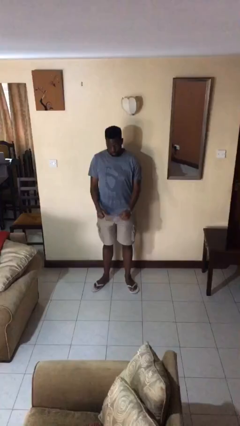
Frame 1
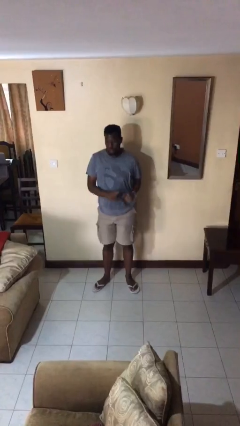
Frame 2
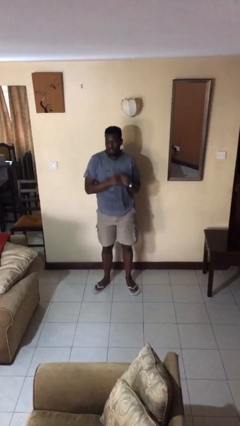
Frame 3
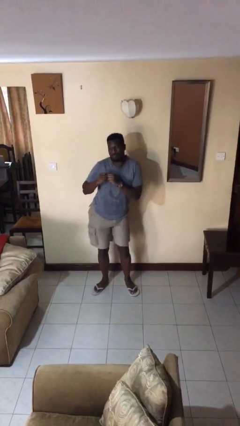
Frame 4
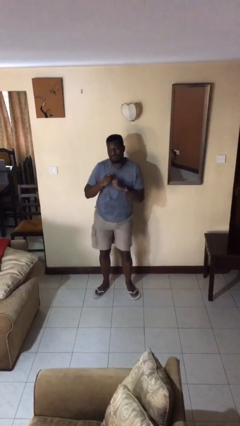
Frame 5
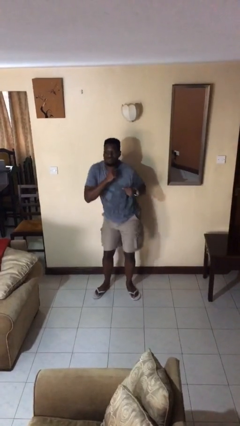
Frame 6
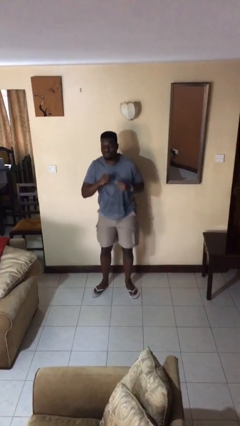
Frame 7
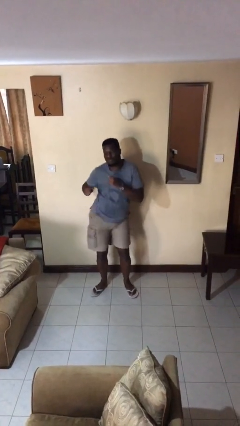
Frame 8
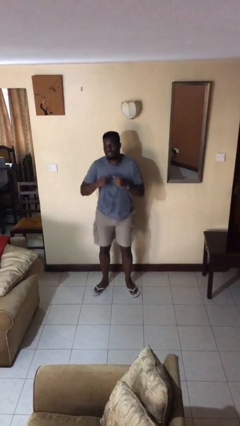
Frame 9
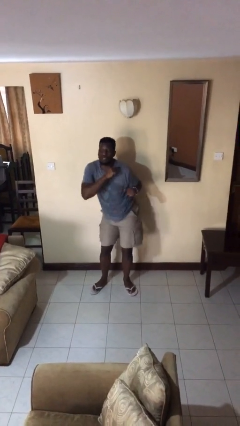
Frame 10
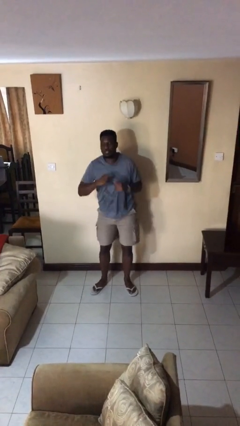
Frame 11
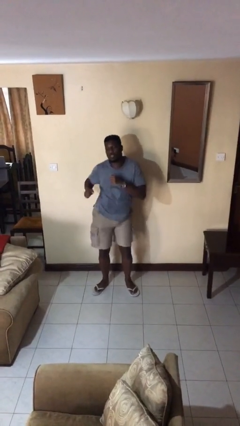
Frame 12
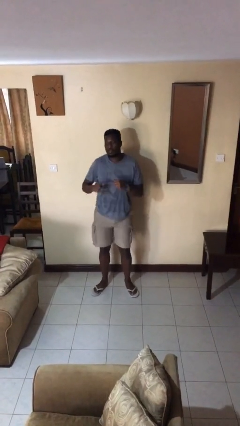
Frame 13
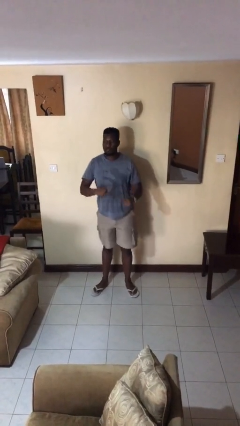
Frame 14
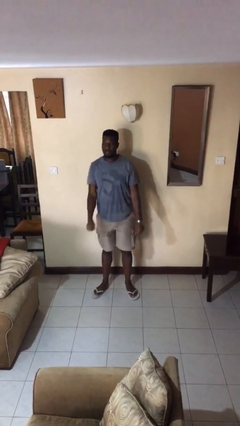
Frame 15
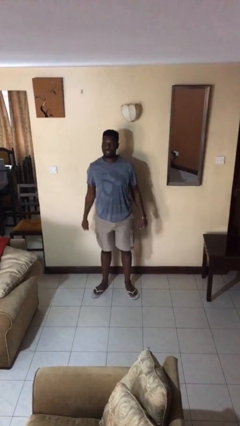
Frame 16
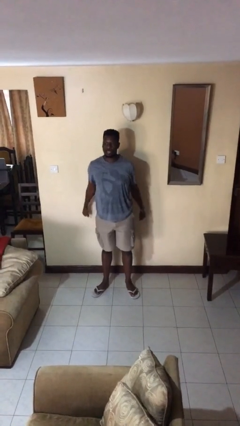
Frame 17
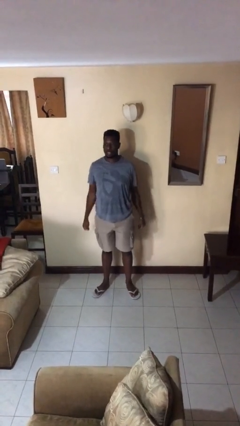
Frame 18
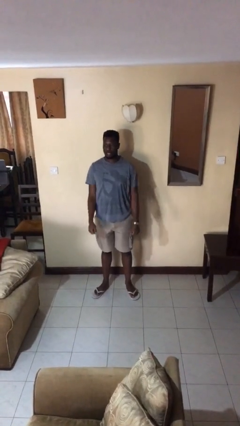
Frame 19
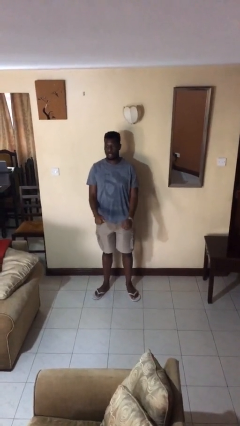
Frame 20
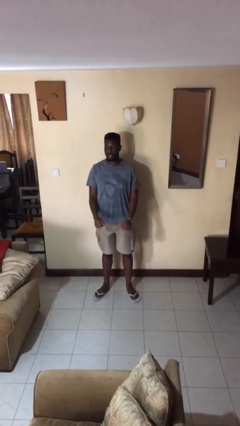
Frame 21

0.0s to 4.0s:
person wiggles hips

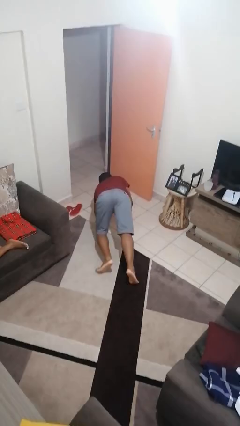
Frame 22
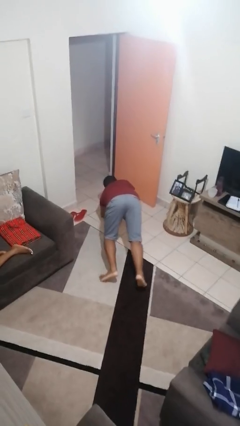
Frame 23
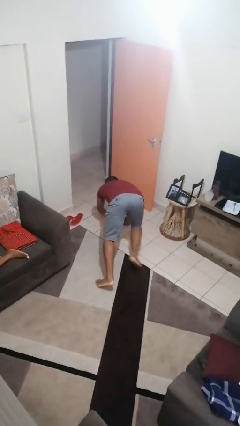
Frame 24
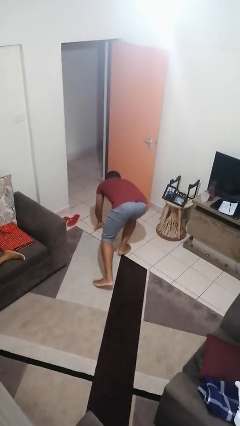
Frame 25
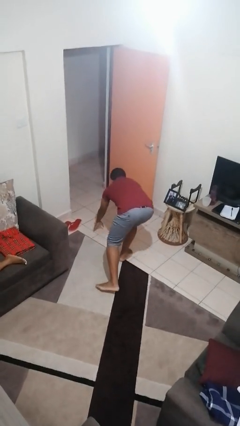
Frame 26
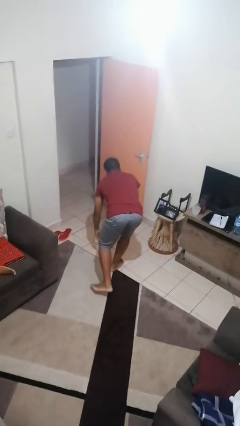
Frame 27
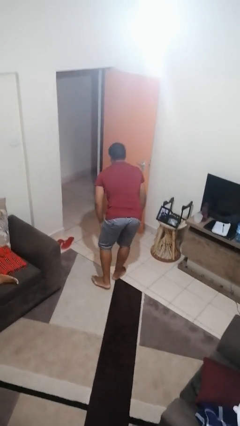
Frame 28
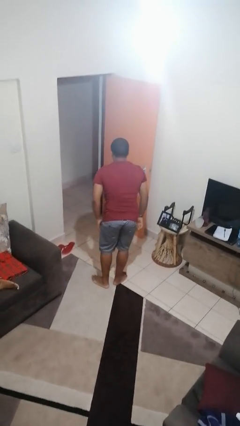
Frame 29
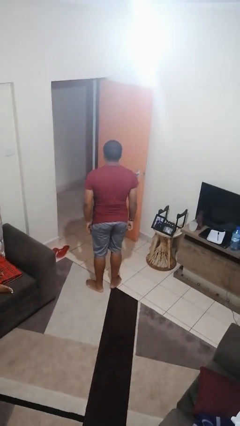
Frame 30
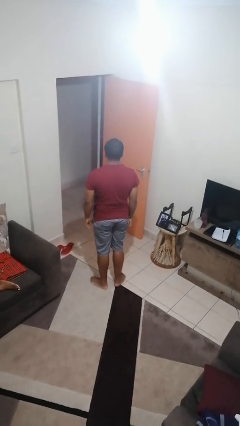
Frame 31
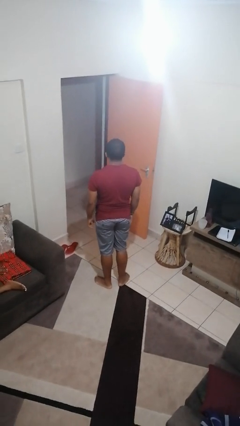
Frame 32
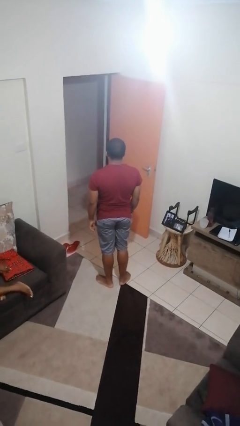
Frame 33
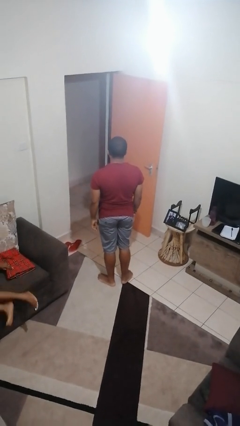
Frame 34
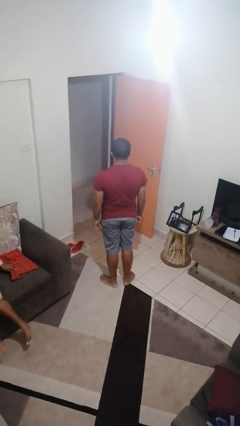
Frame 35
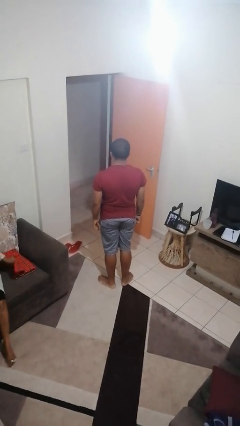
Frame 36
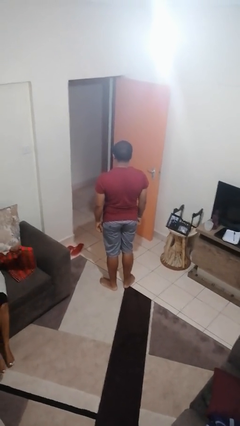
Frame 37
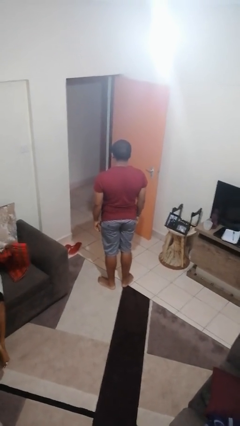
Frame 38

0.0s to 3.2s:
person stands up from floor

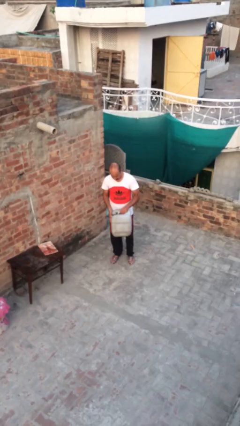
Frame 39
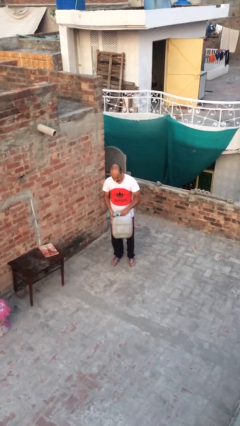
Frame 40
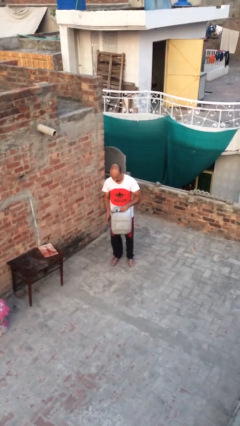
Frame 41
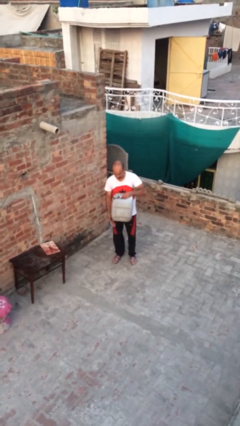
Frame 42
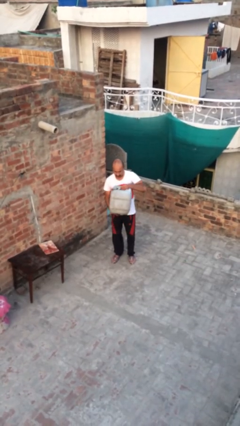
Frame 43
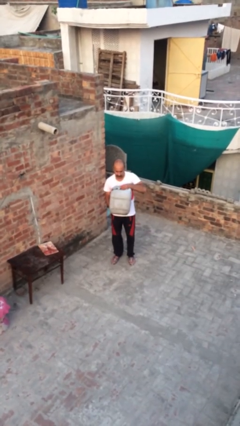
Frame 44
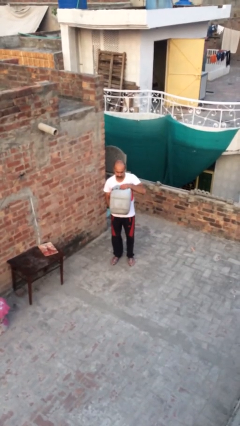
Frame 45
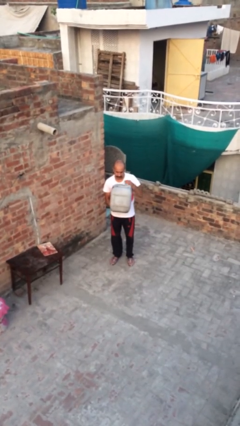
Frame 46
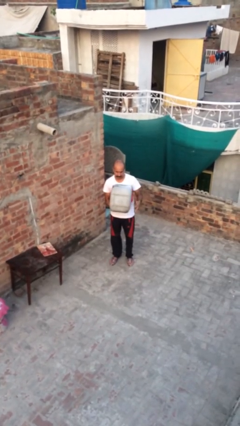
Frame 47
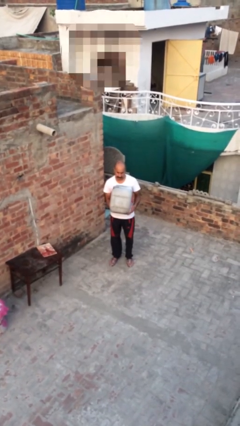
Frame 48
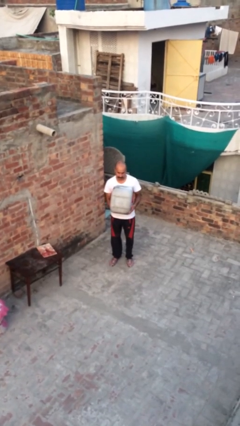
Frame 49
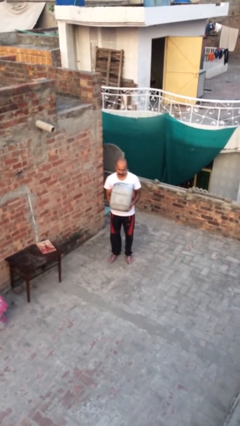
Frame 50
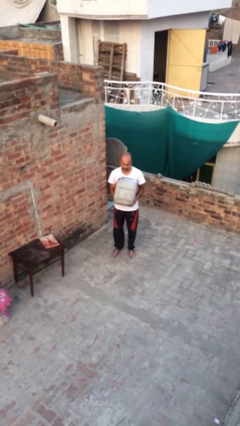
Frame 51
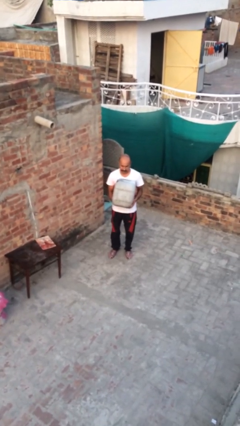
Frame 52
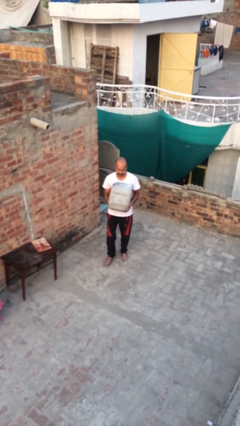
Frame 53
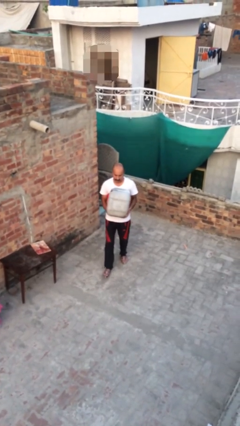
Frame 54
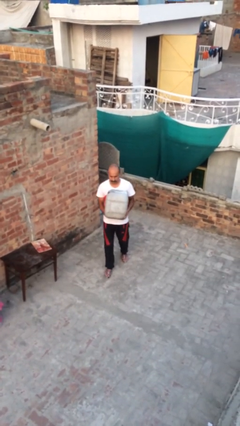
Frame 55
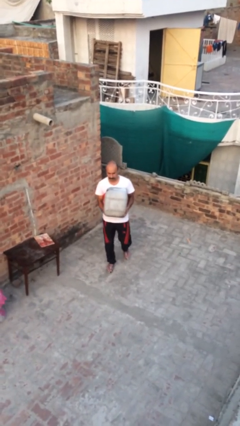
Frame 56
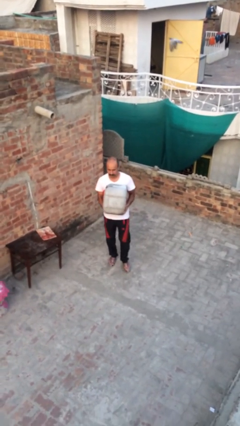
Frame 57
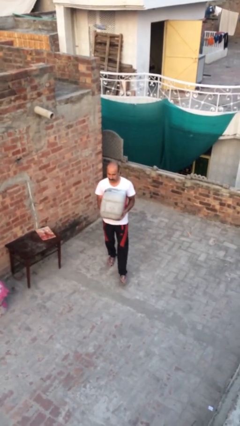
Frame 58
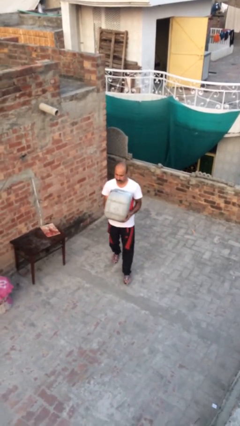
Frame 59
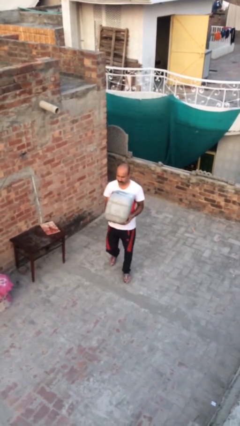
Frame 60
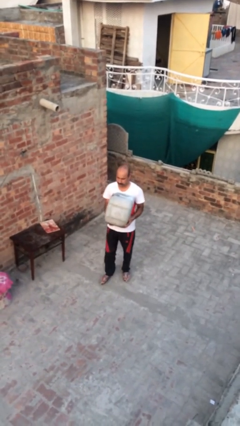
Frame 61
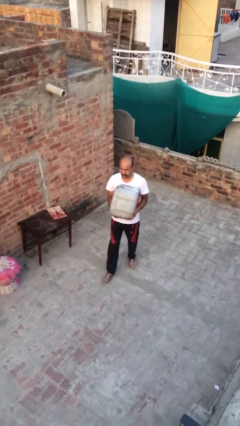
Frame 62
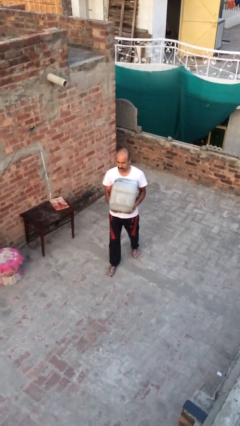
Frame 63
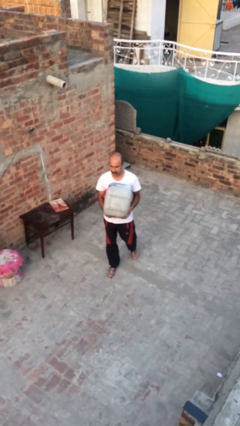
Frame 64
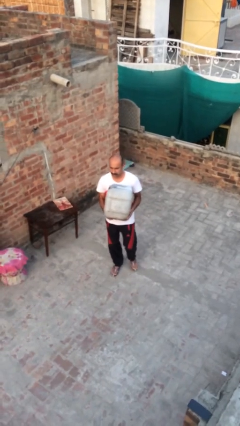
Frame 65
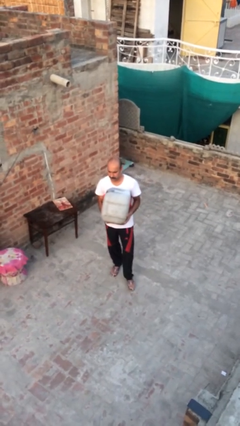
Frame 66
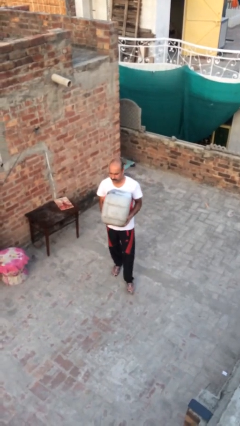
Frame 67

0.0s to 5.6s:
person carries heavy object

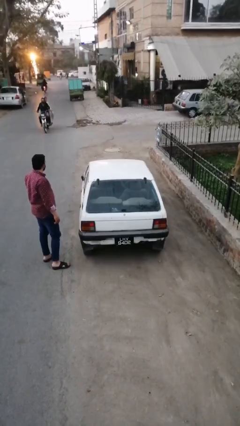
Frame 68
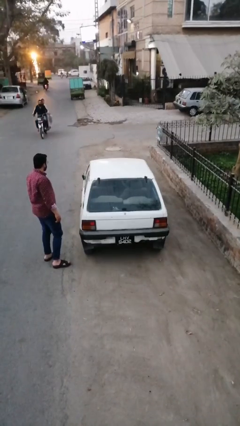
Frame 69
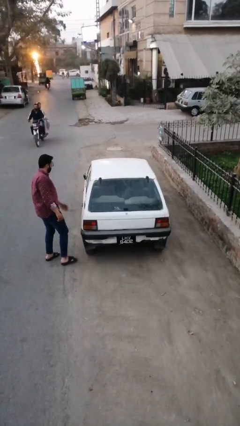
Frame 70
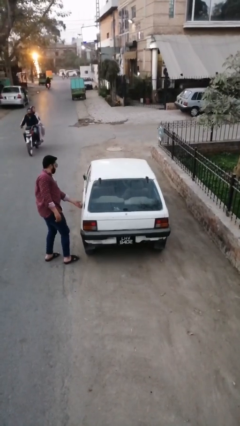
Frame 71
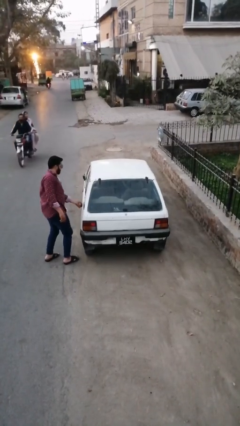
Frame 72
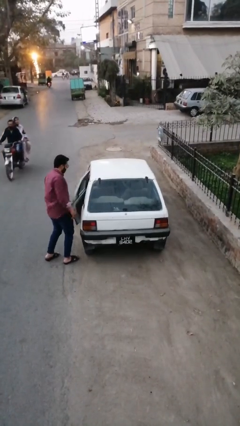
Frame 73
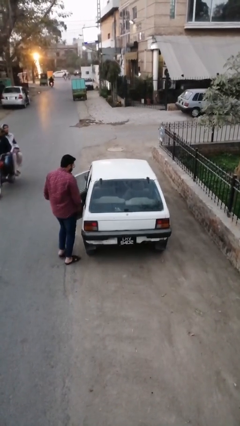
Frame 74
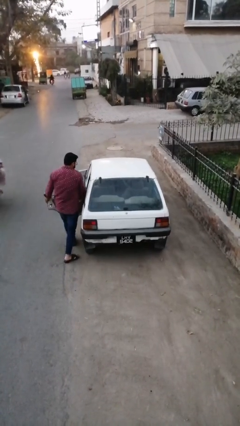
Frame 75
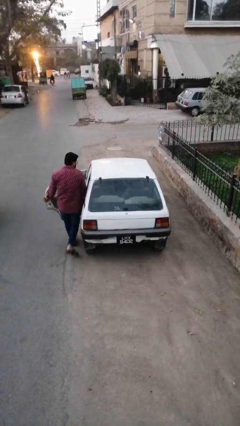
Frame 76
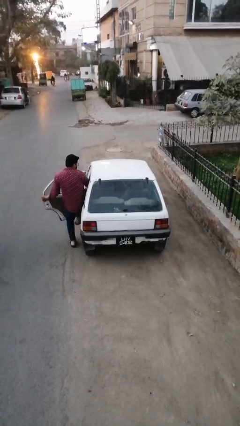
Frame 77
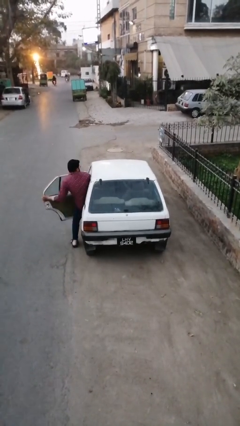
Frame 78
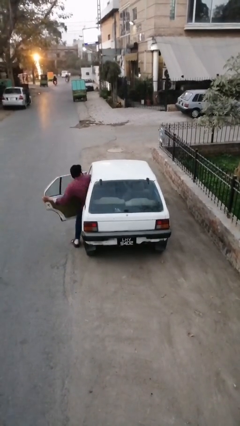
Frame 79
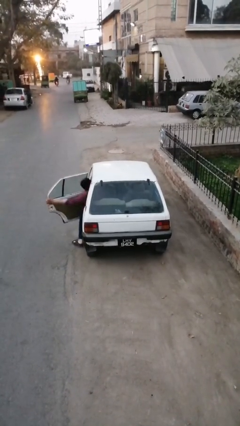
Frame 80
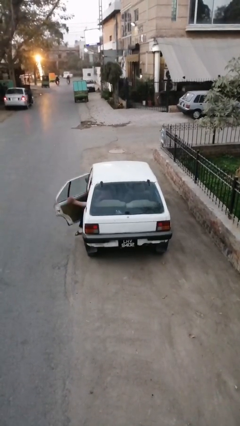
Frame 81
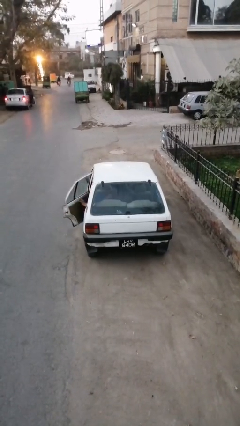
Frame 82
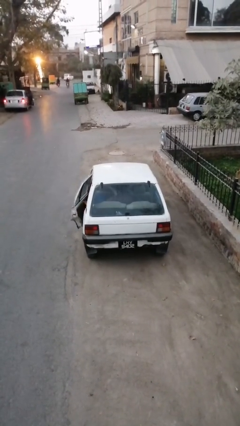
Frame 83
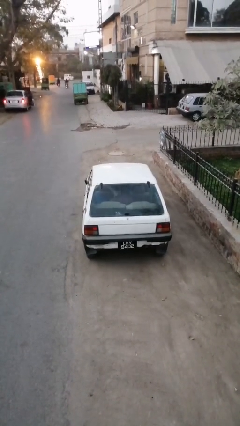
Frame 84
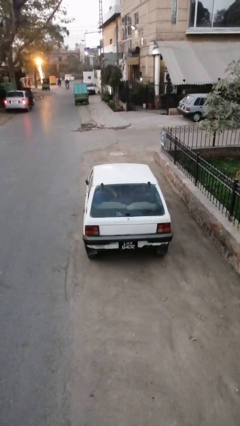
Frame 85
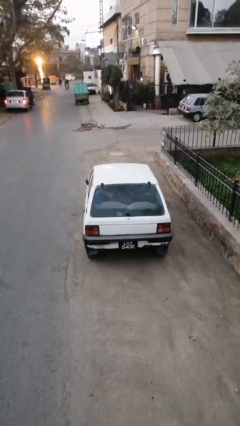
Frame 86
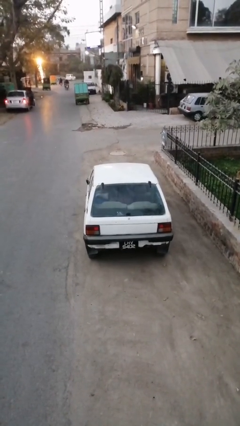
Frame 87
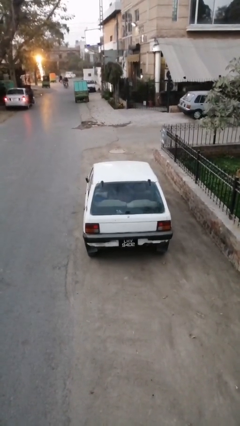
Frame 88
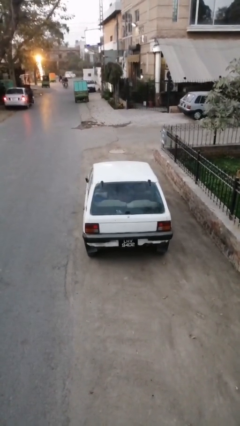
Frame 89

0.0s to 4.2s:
car picks up person
